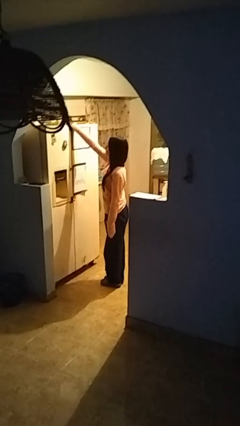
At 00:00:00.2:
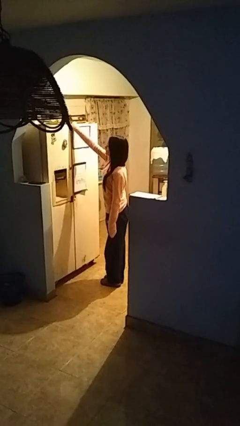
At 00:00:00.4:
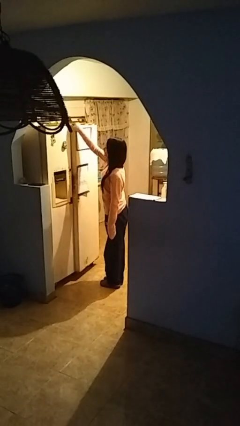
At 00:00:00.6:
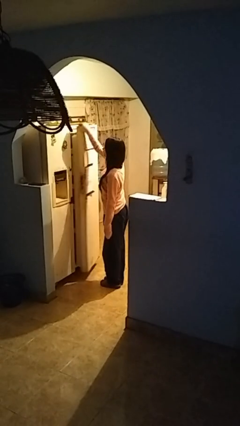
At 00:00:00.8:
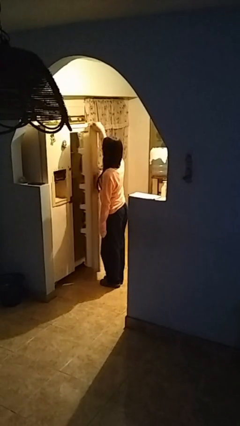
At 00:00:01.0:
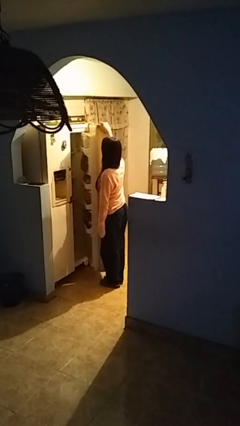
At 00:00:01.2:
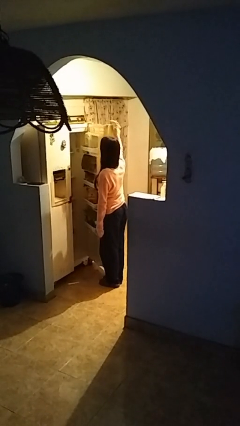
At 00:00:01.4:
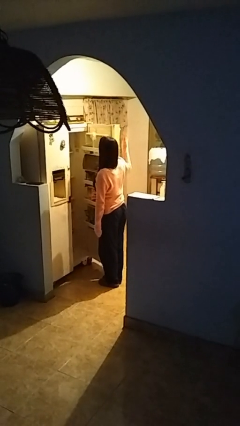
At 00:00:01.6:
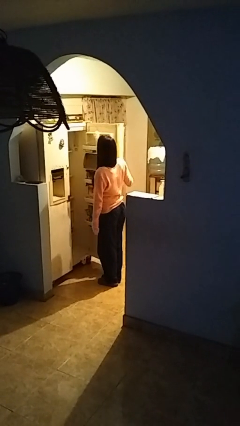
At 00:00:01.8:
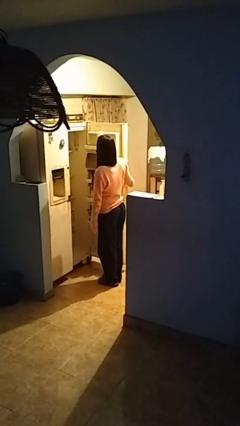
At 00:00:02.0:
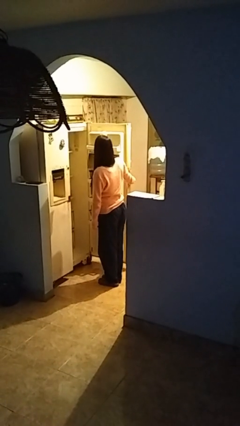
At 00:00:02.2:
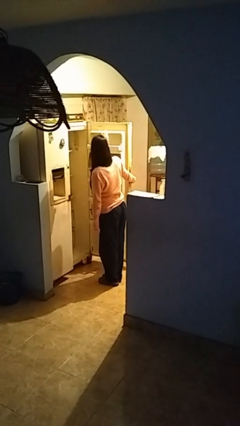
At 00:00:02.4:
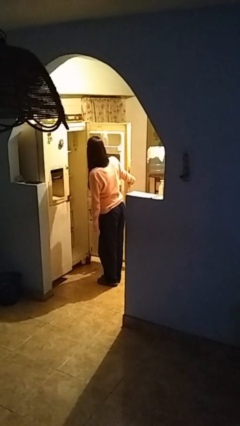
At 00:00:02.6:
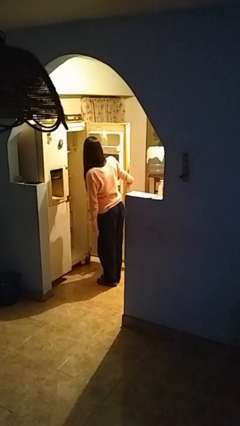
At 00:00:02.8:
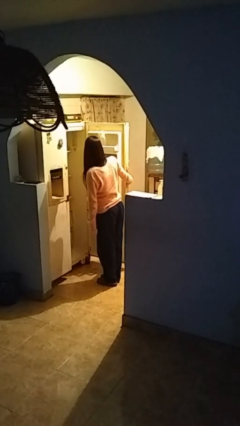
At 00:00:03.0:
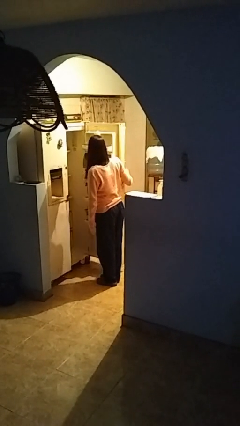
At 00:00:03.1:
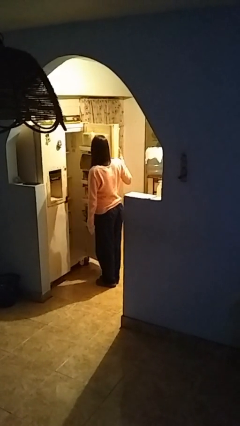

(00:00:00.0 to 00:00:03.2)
person opens refrigerator

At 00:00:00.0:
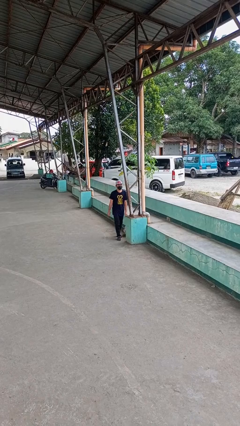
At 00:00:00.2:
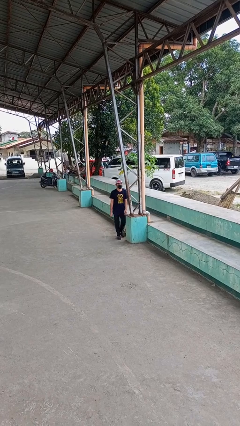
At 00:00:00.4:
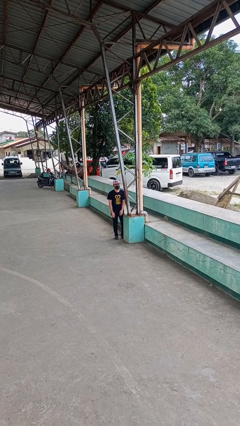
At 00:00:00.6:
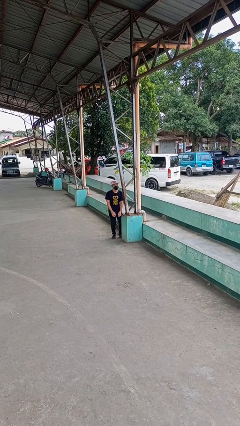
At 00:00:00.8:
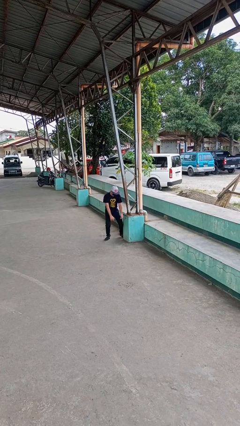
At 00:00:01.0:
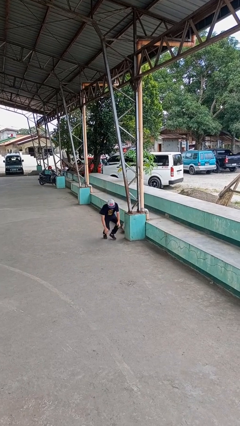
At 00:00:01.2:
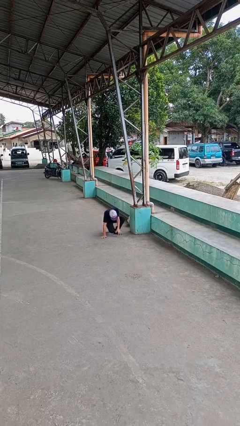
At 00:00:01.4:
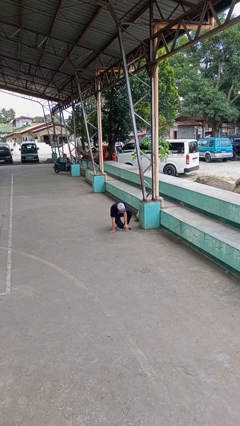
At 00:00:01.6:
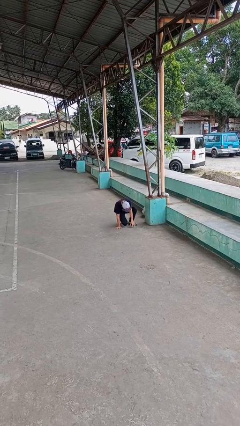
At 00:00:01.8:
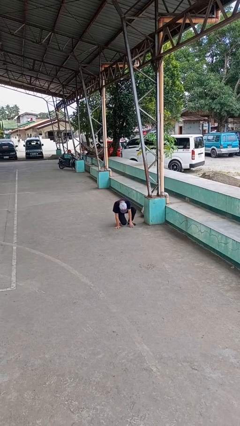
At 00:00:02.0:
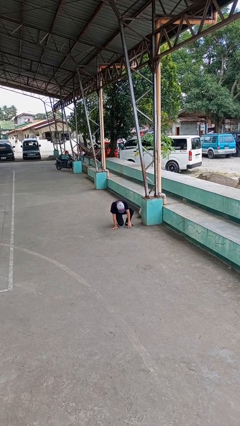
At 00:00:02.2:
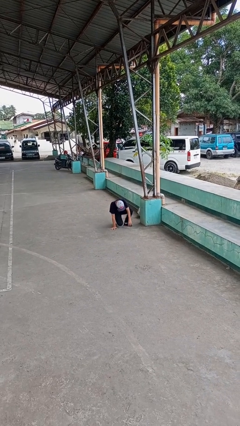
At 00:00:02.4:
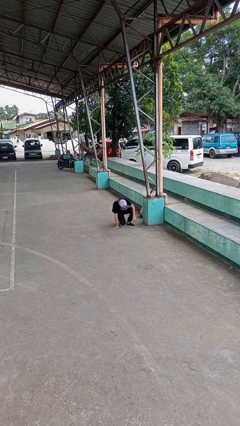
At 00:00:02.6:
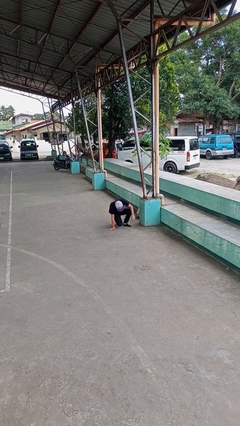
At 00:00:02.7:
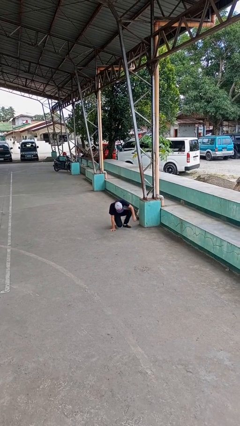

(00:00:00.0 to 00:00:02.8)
person trips on object on floor

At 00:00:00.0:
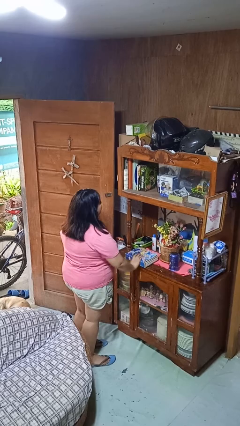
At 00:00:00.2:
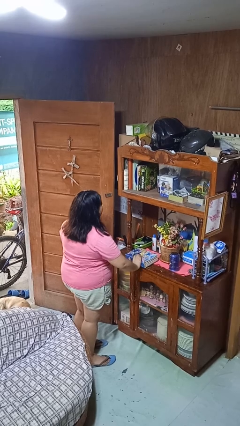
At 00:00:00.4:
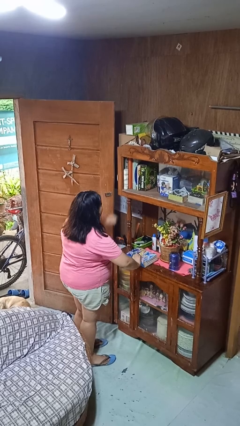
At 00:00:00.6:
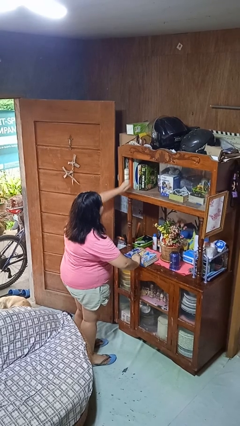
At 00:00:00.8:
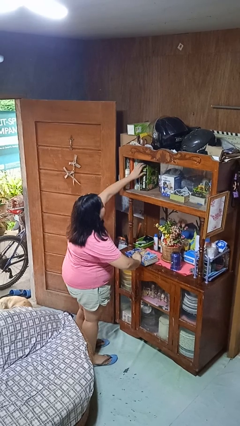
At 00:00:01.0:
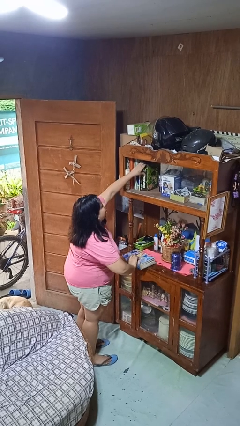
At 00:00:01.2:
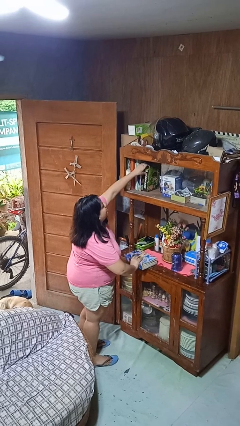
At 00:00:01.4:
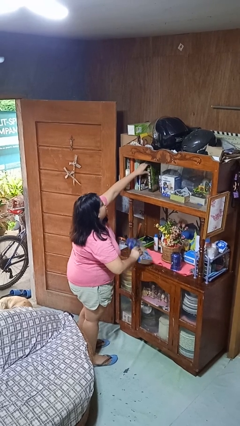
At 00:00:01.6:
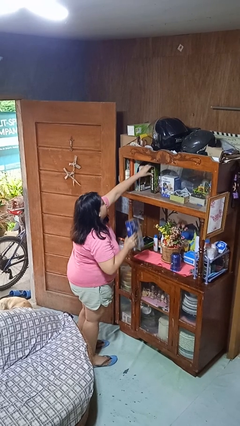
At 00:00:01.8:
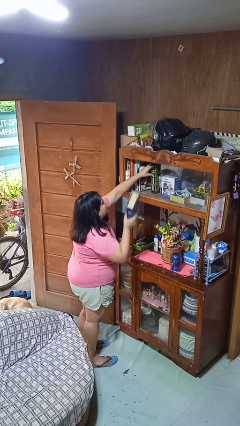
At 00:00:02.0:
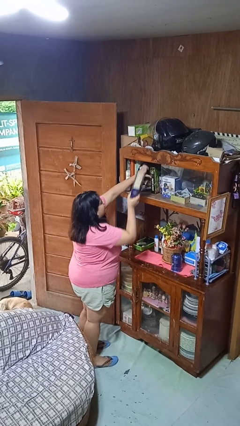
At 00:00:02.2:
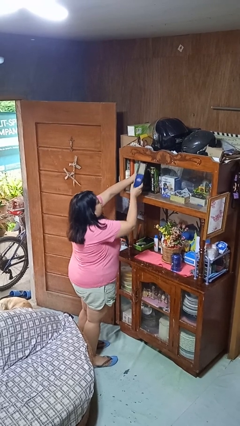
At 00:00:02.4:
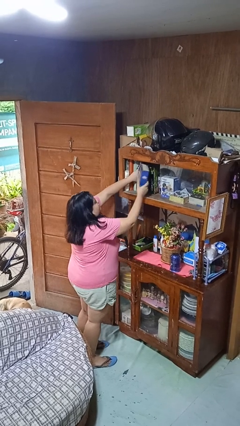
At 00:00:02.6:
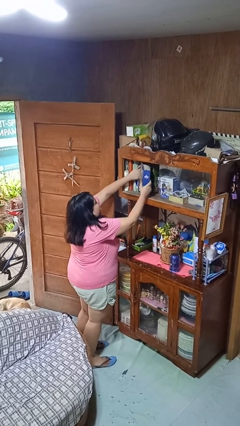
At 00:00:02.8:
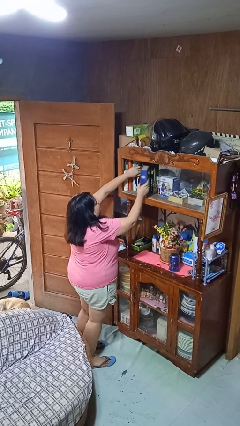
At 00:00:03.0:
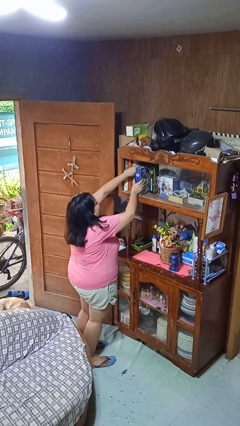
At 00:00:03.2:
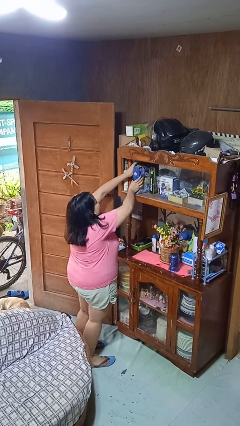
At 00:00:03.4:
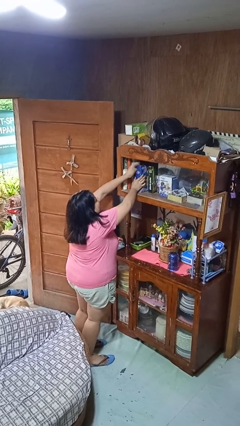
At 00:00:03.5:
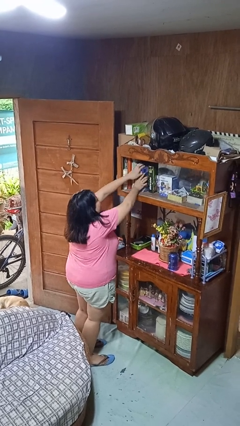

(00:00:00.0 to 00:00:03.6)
person puts down object on shelf

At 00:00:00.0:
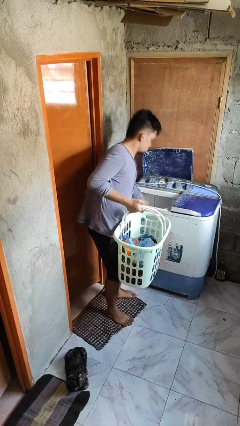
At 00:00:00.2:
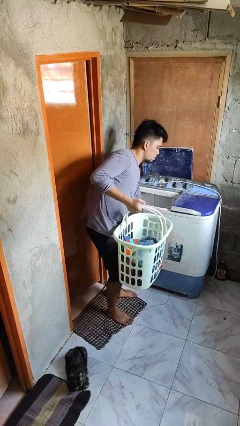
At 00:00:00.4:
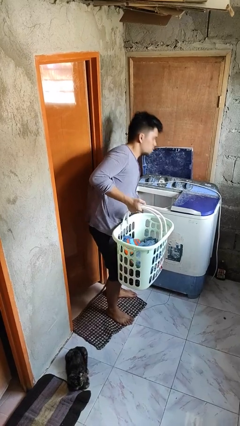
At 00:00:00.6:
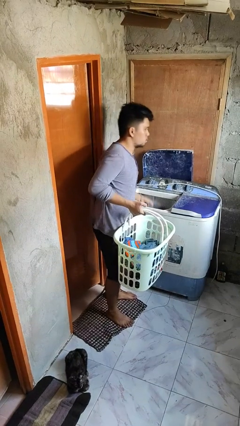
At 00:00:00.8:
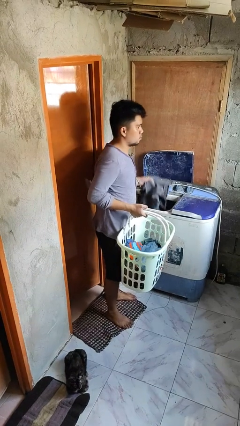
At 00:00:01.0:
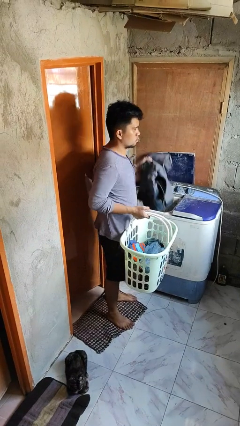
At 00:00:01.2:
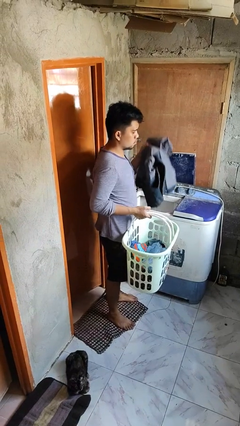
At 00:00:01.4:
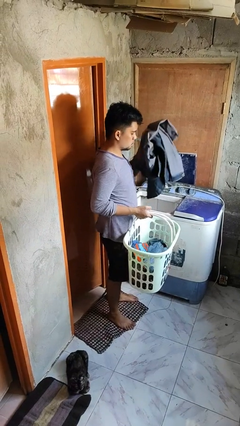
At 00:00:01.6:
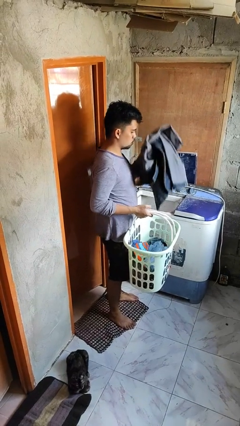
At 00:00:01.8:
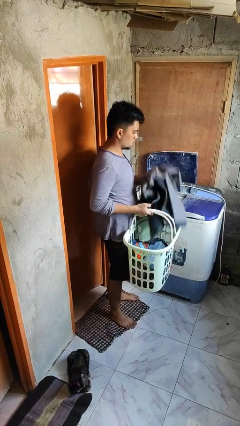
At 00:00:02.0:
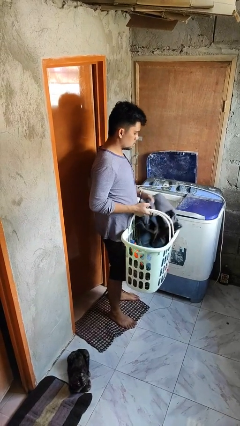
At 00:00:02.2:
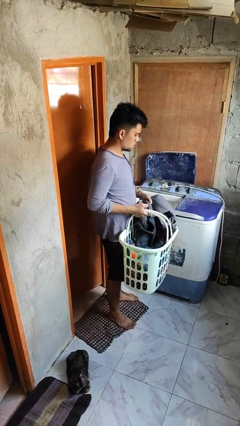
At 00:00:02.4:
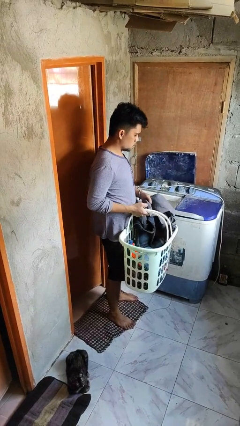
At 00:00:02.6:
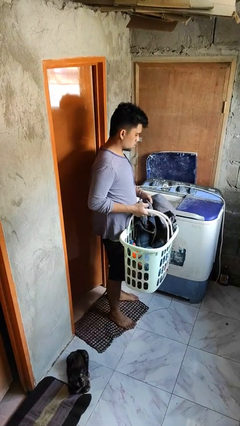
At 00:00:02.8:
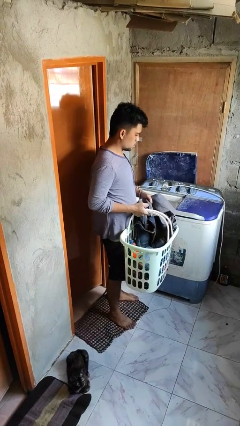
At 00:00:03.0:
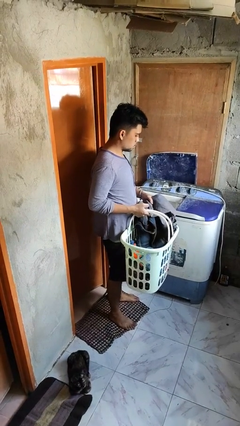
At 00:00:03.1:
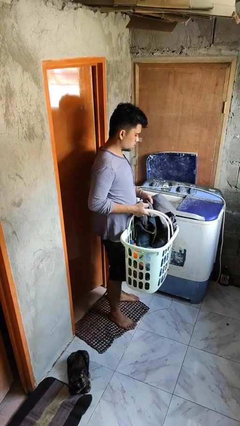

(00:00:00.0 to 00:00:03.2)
person unloads clotheswasher

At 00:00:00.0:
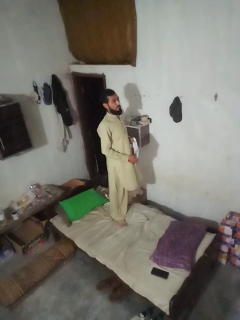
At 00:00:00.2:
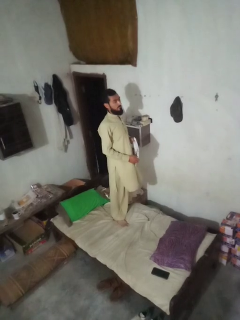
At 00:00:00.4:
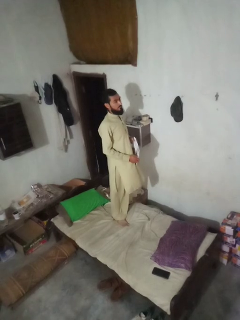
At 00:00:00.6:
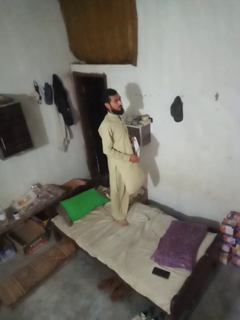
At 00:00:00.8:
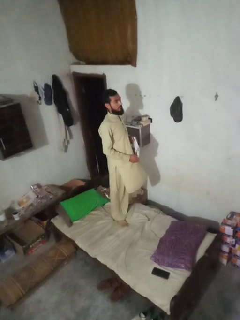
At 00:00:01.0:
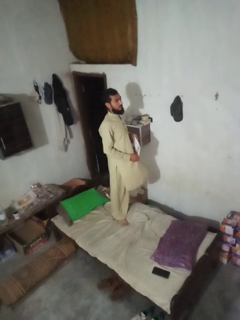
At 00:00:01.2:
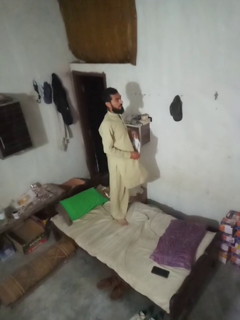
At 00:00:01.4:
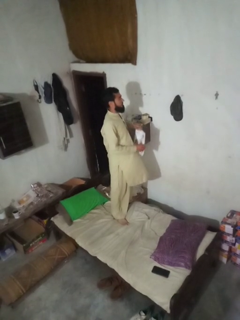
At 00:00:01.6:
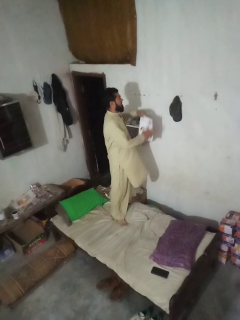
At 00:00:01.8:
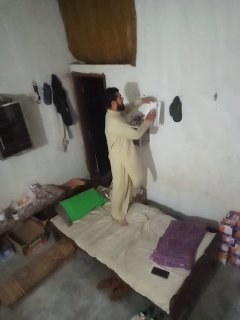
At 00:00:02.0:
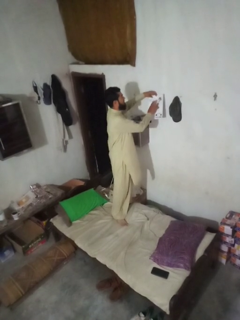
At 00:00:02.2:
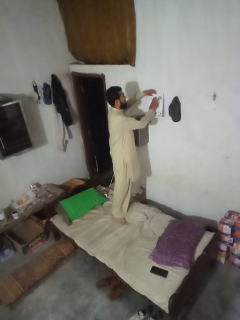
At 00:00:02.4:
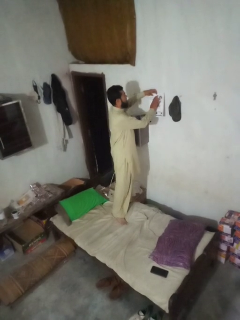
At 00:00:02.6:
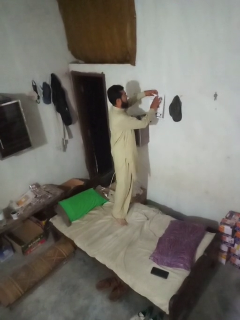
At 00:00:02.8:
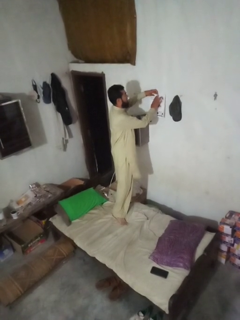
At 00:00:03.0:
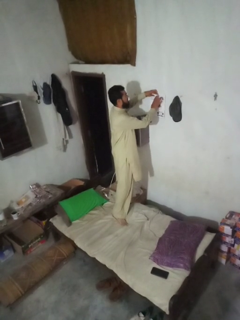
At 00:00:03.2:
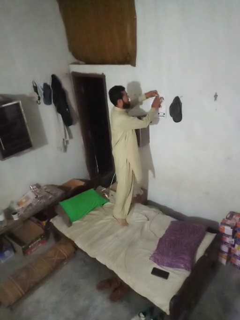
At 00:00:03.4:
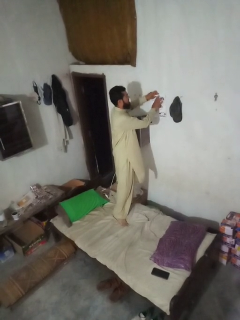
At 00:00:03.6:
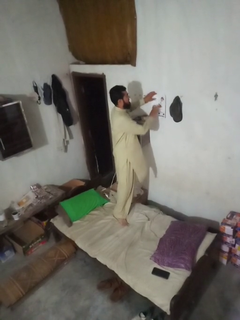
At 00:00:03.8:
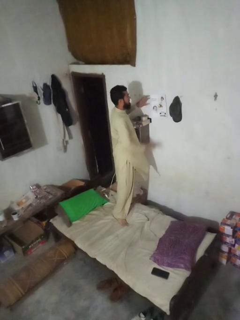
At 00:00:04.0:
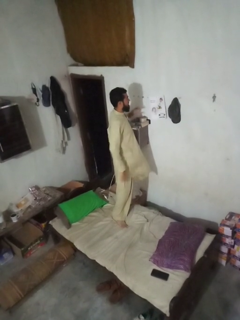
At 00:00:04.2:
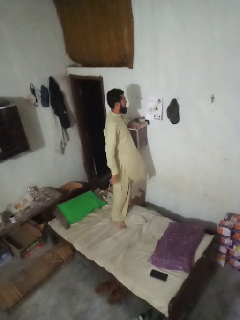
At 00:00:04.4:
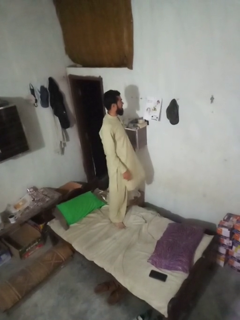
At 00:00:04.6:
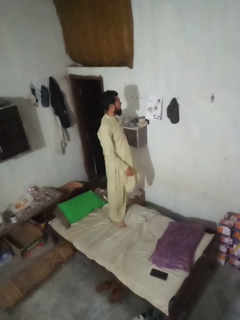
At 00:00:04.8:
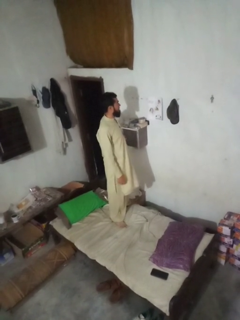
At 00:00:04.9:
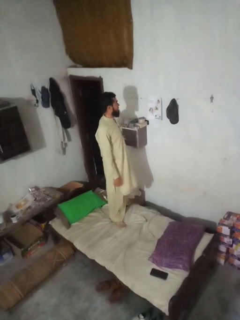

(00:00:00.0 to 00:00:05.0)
person puts up picture frame

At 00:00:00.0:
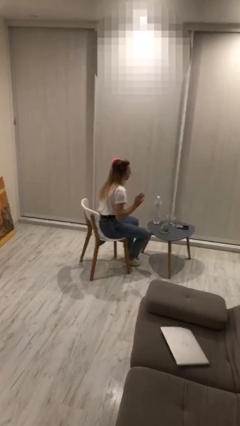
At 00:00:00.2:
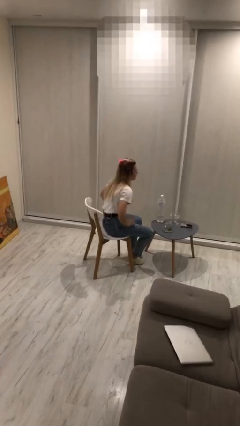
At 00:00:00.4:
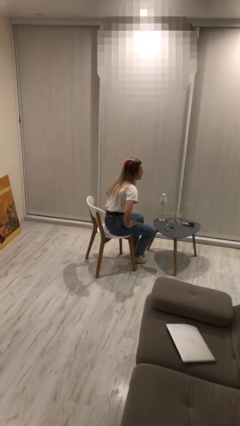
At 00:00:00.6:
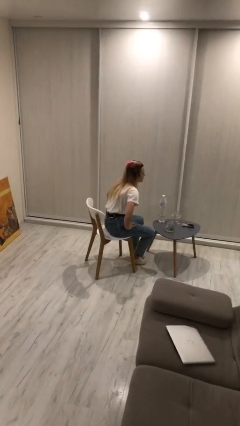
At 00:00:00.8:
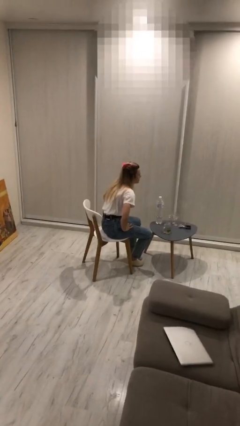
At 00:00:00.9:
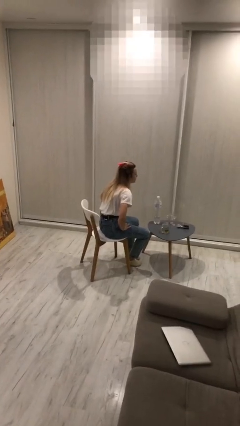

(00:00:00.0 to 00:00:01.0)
person slaps hands on thighs
